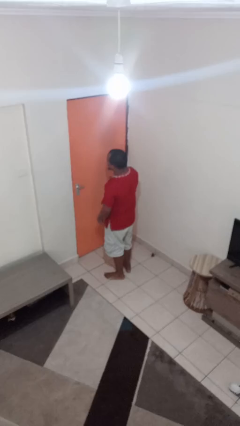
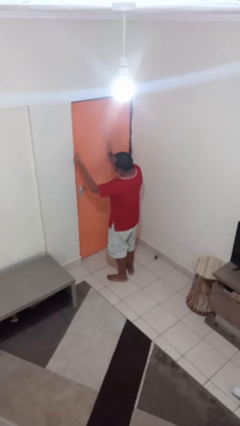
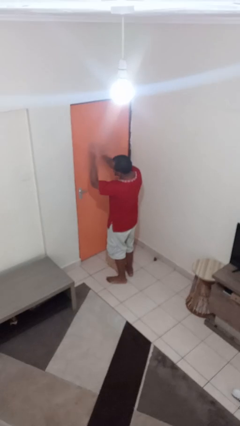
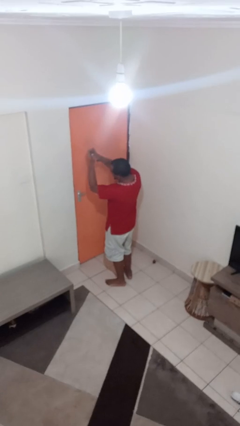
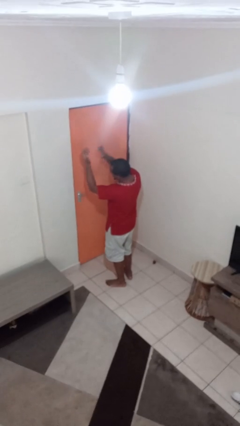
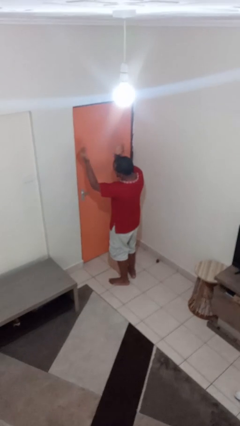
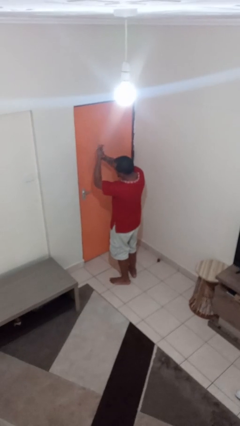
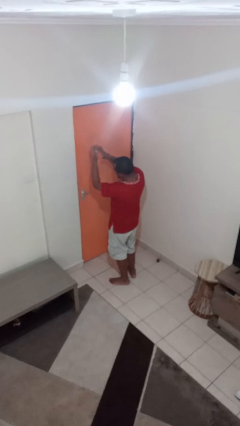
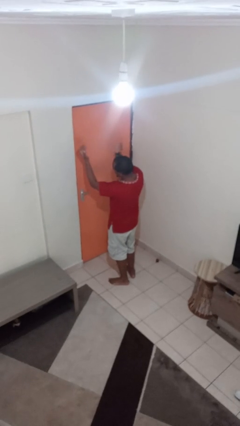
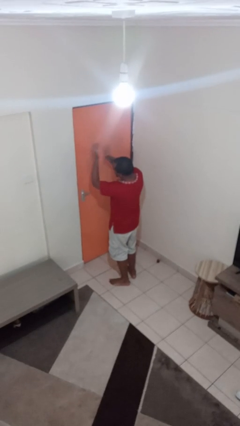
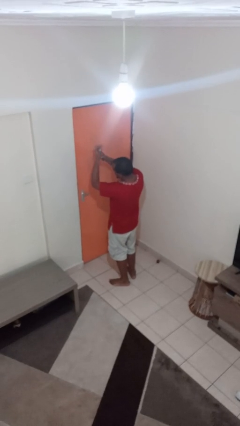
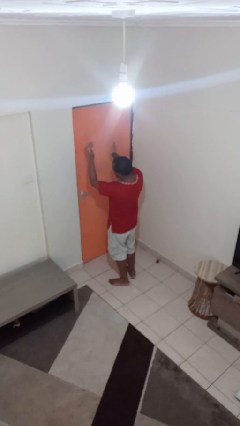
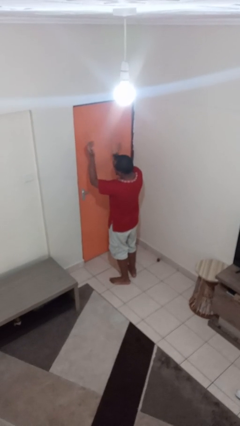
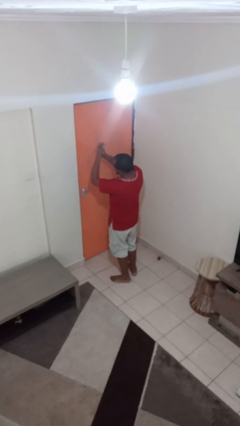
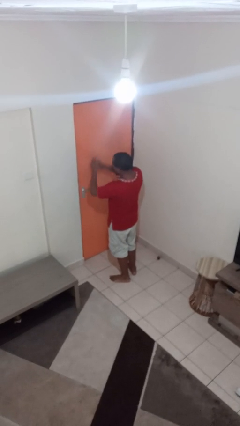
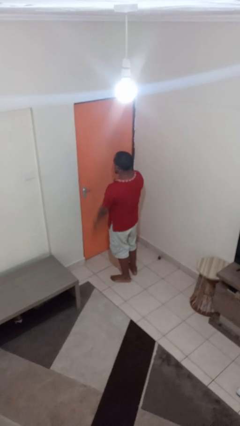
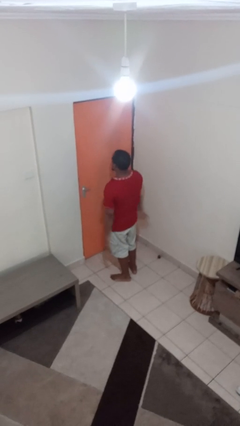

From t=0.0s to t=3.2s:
person claps hands

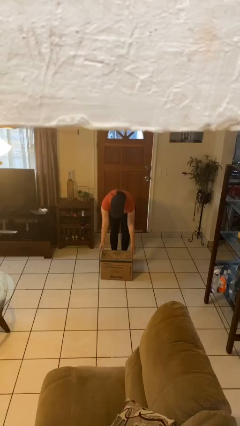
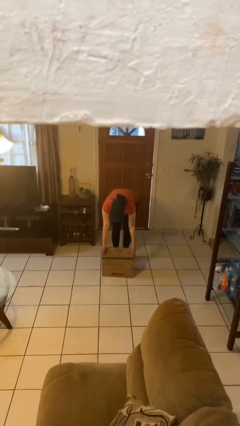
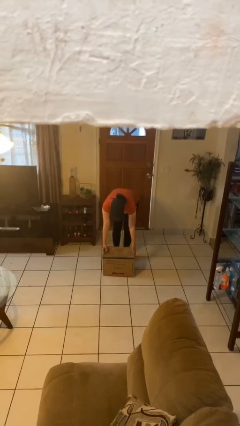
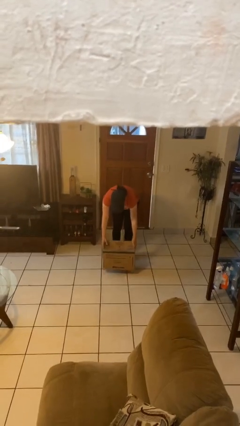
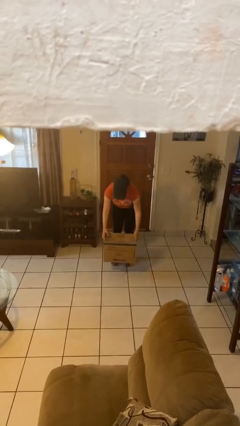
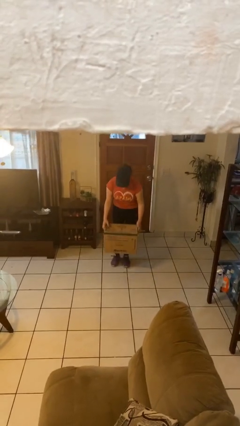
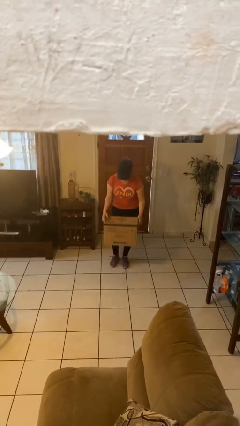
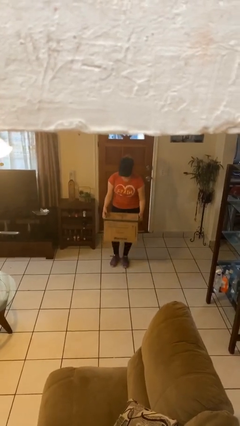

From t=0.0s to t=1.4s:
person picks up object from floor

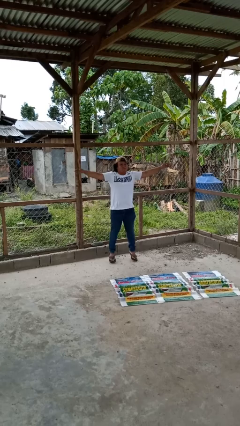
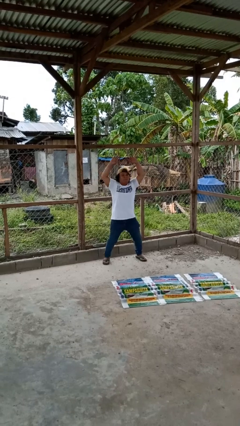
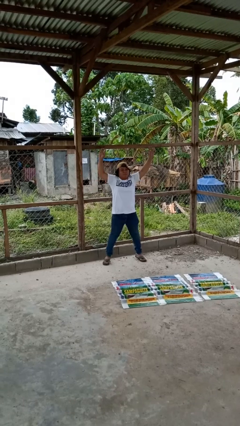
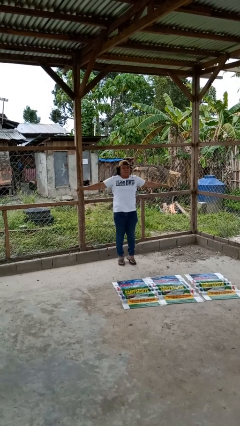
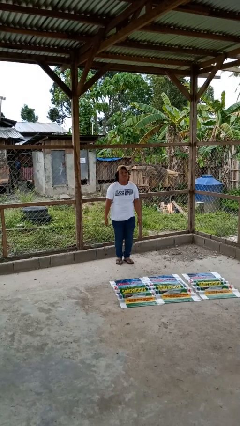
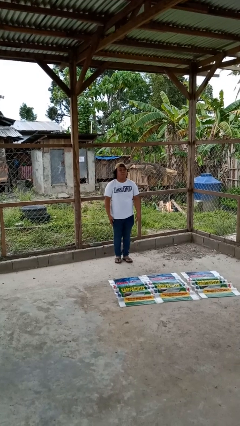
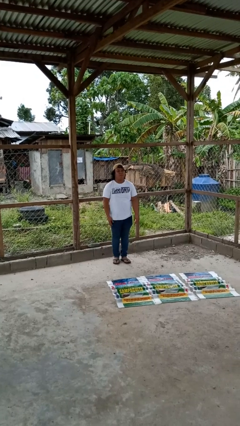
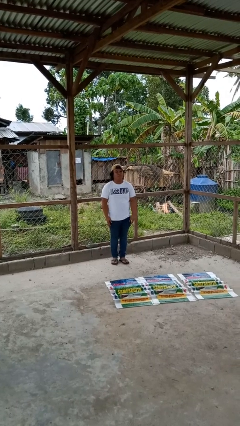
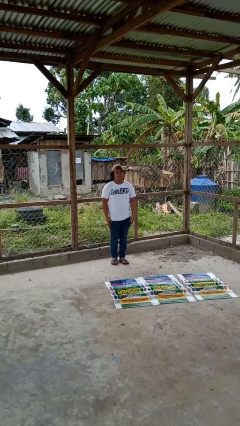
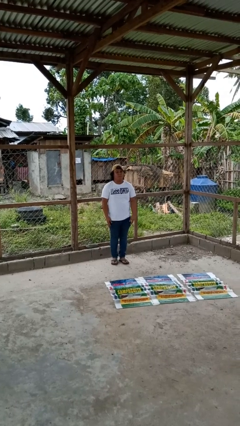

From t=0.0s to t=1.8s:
person exercises with jumping jacks

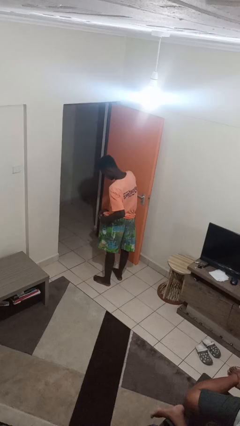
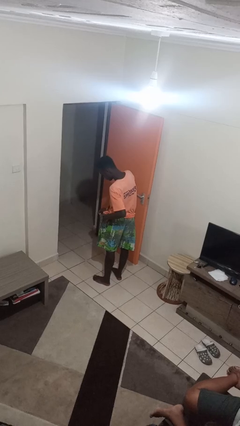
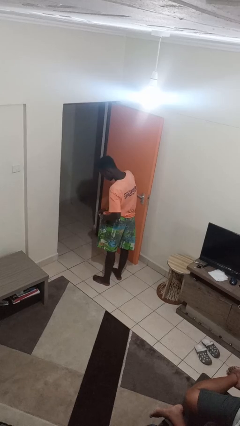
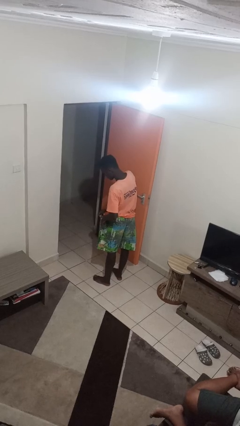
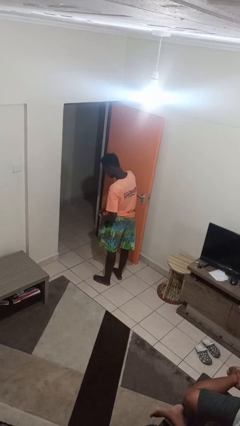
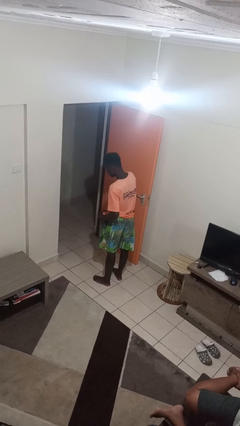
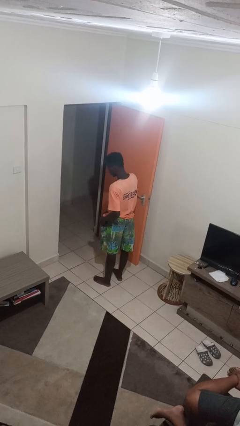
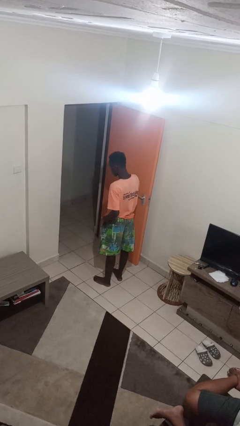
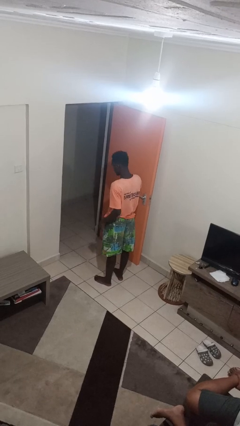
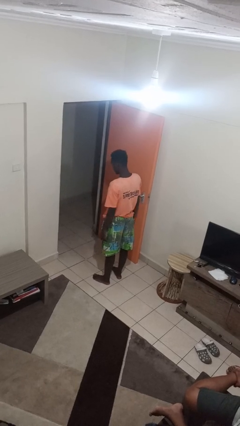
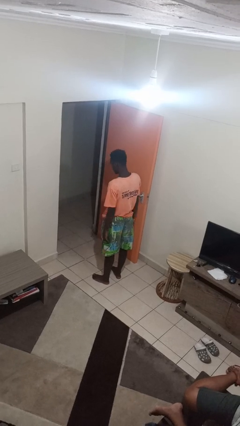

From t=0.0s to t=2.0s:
person puts phone into pocket

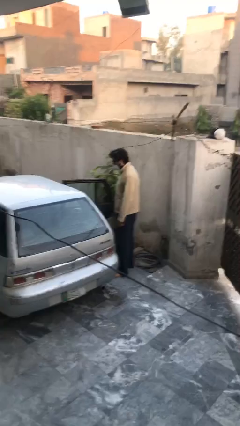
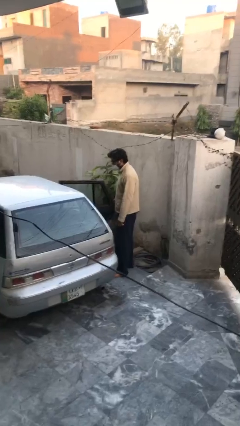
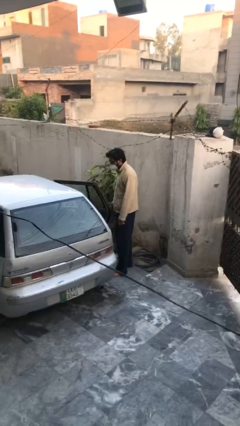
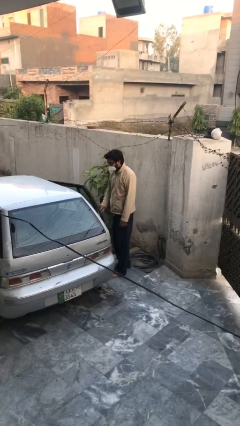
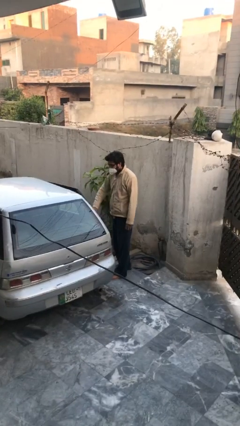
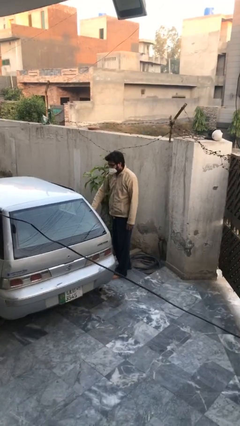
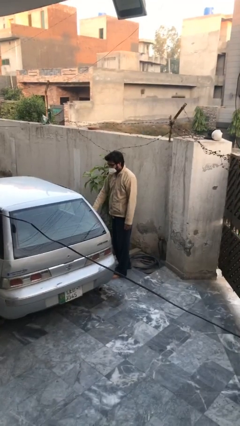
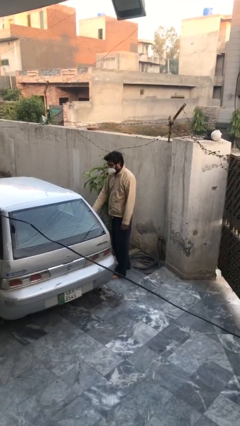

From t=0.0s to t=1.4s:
person closes car door

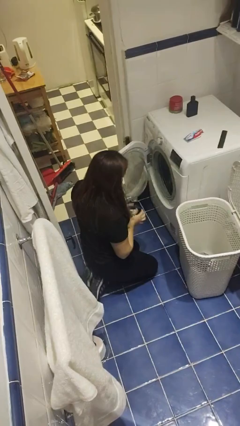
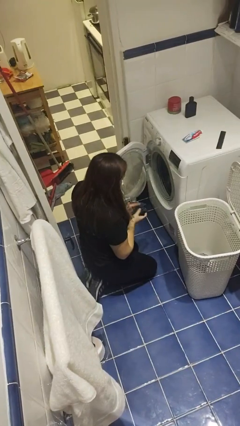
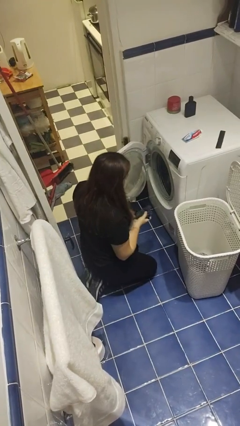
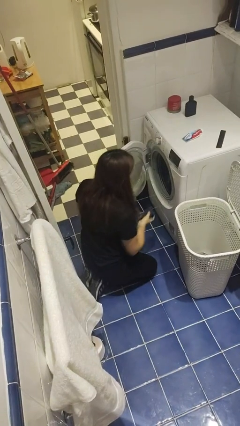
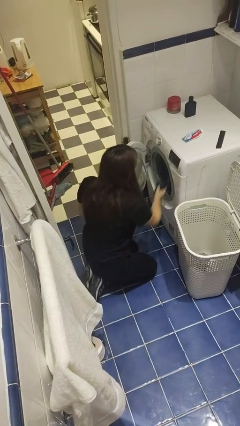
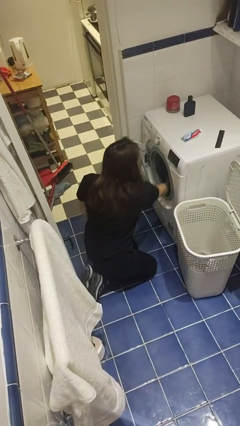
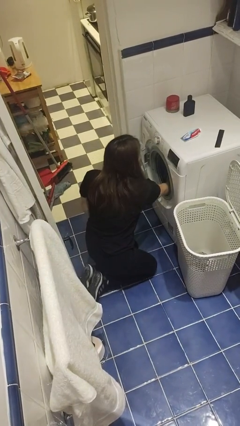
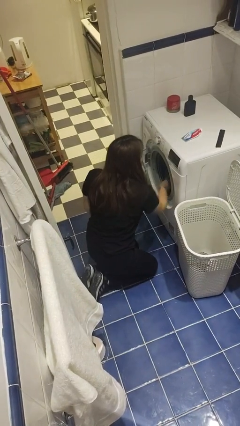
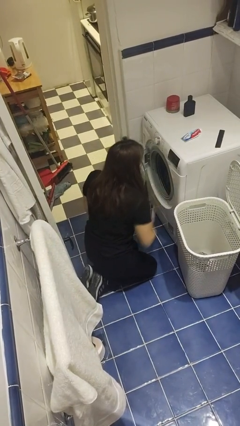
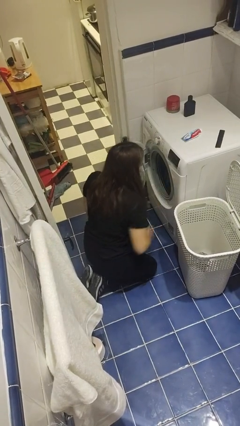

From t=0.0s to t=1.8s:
person loads clotheswasher

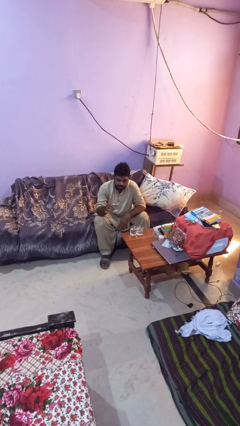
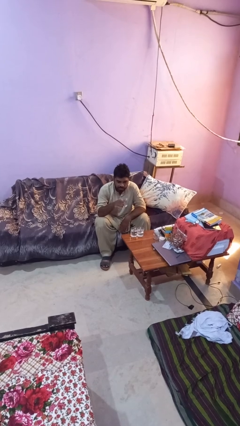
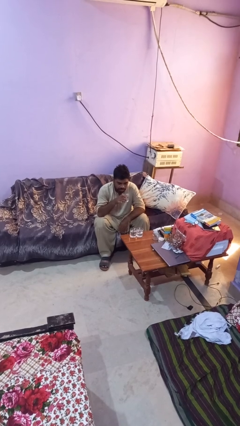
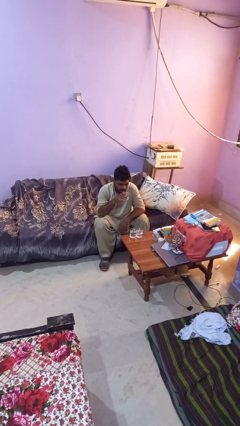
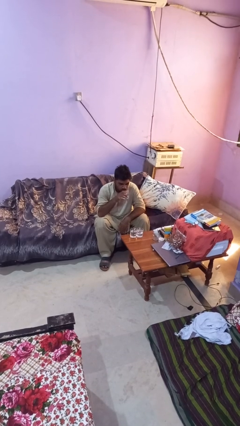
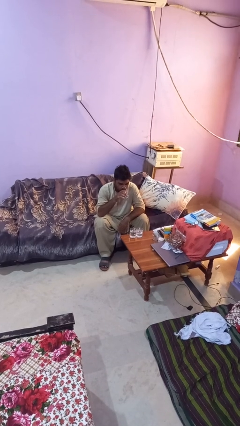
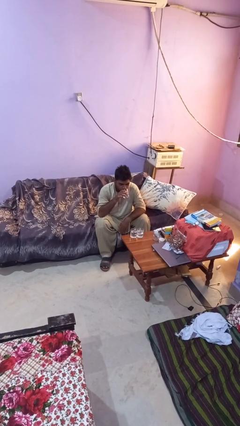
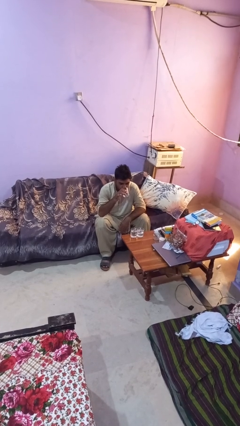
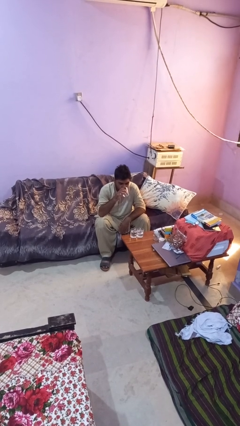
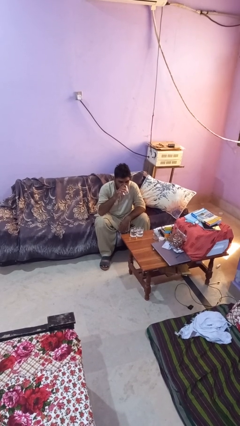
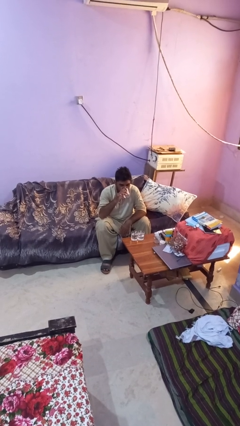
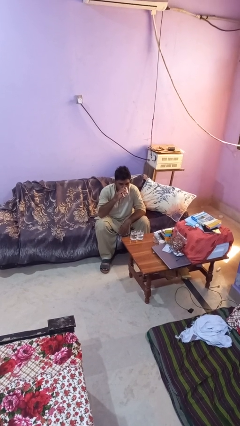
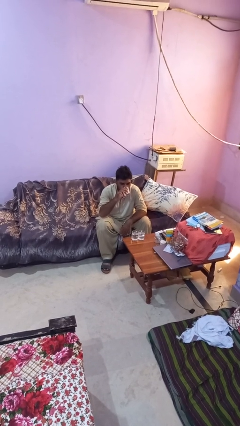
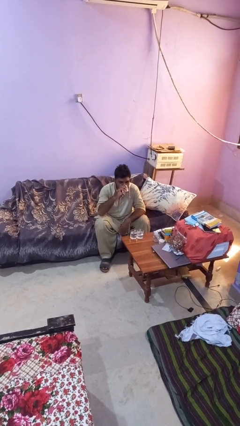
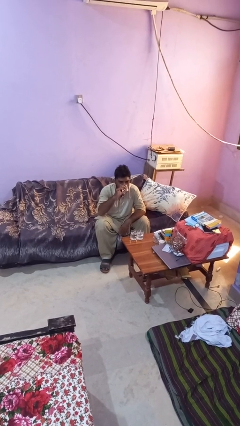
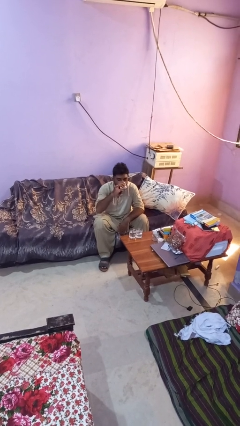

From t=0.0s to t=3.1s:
person drinks from shotglass

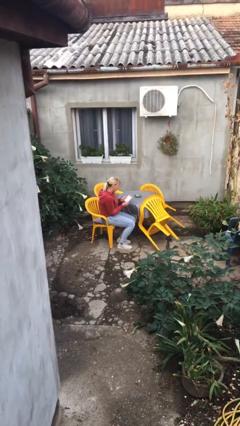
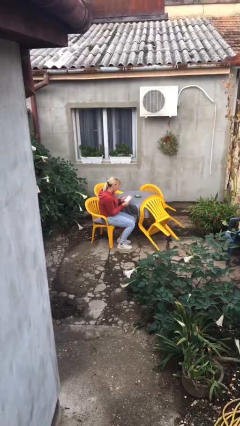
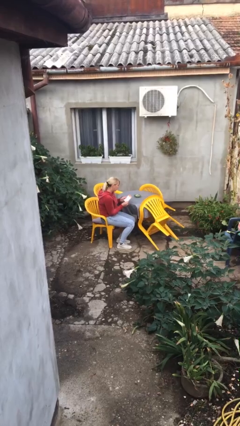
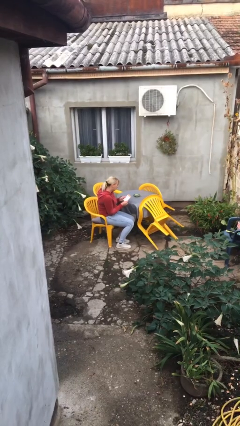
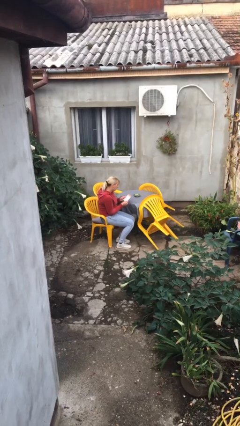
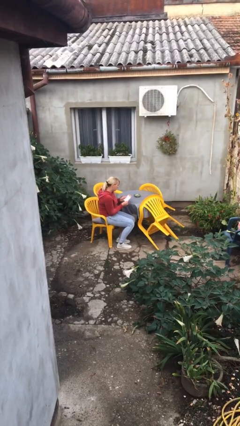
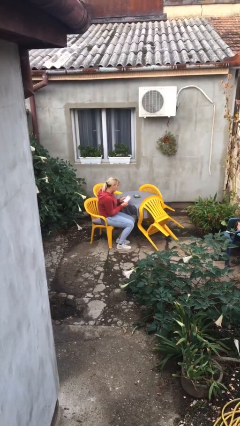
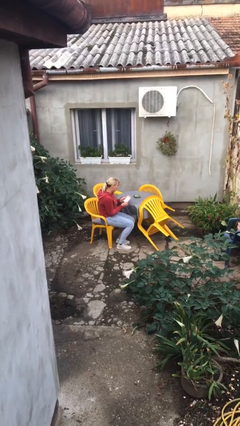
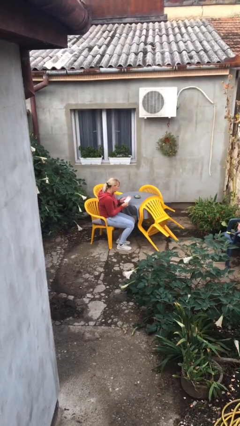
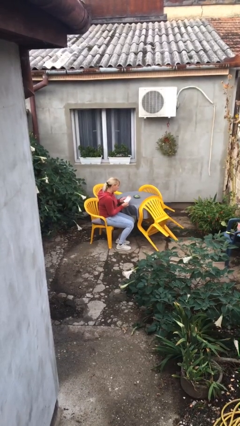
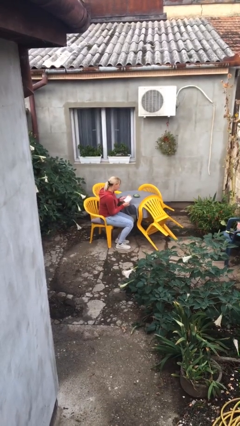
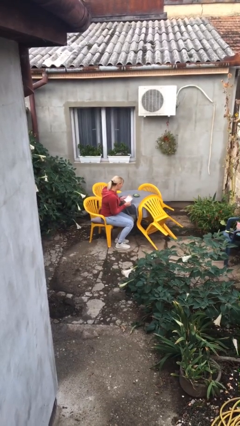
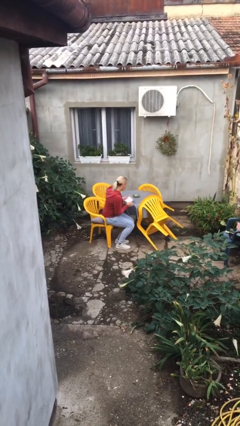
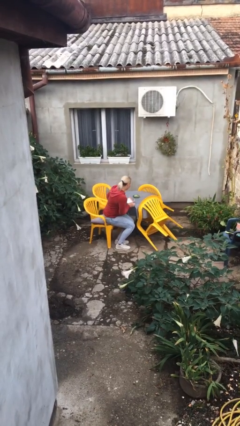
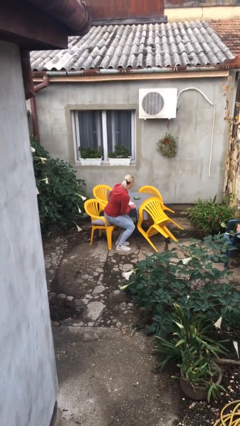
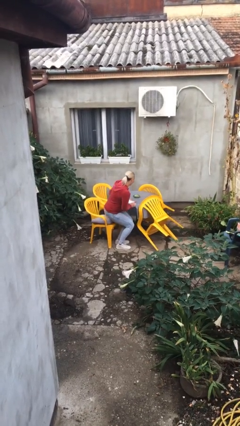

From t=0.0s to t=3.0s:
person reads document
